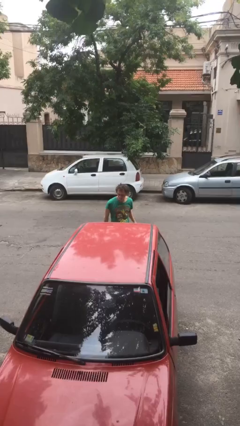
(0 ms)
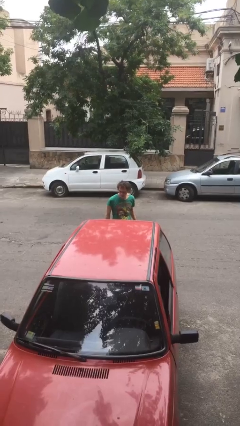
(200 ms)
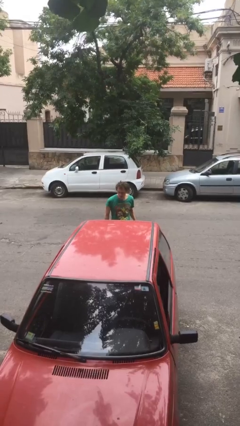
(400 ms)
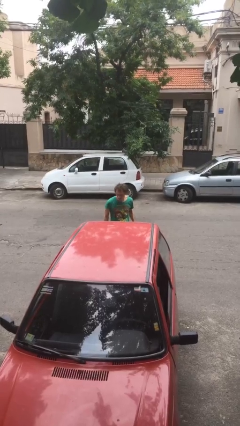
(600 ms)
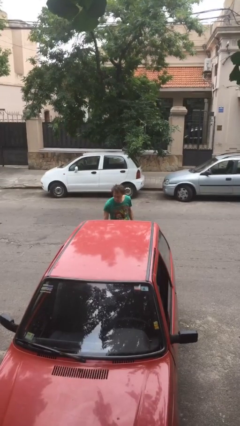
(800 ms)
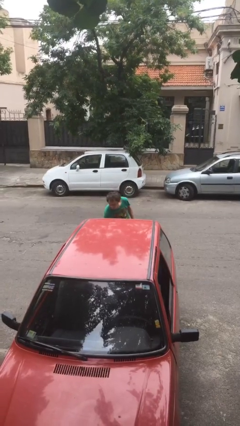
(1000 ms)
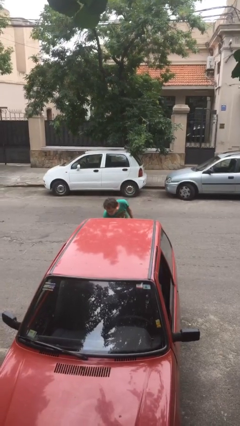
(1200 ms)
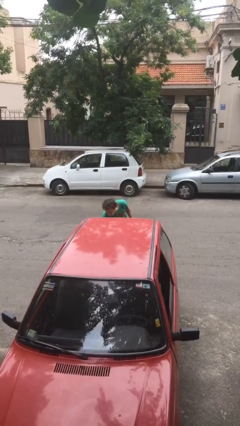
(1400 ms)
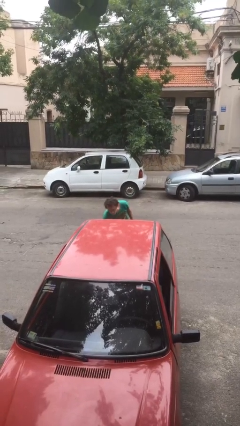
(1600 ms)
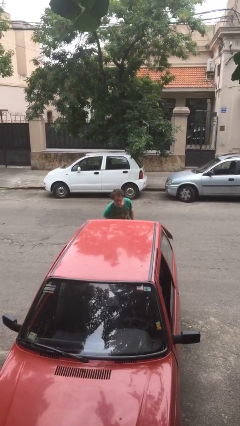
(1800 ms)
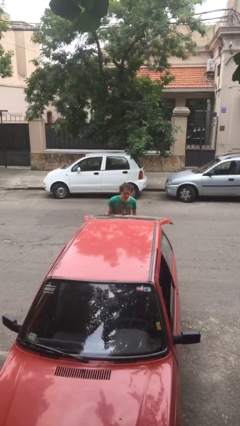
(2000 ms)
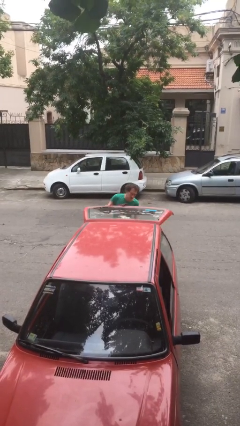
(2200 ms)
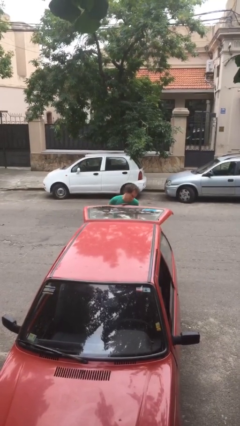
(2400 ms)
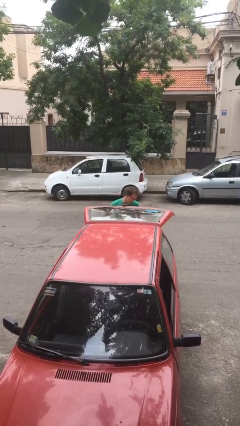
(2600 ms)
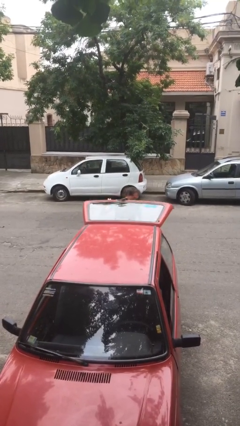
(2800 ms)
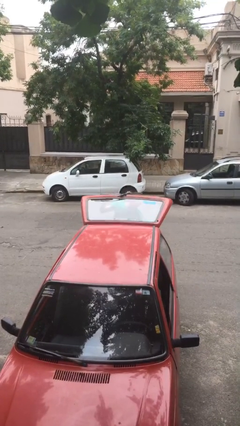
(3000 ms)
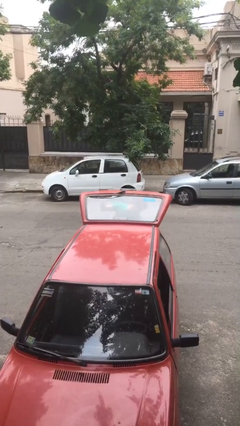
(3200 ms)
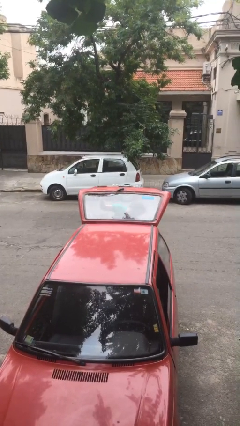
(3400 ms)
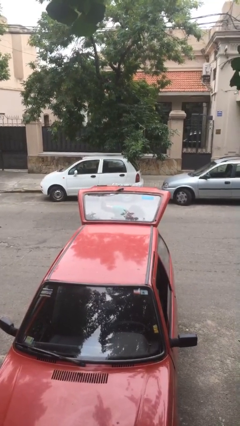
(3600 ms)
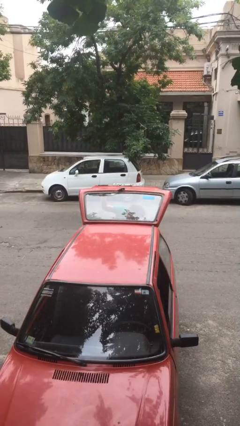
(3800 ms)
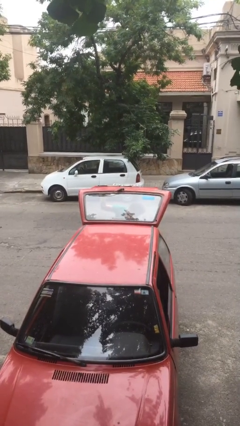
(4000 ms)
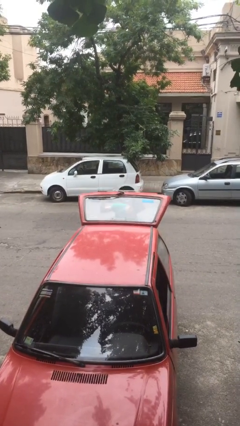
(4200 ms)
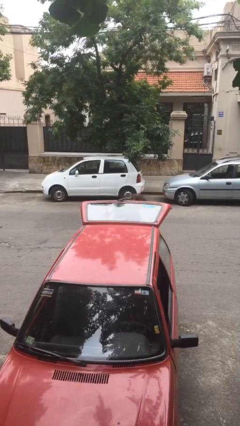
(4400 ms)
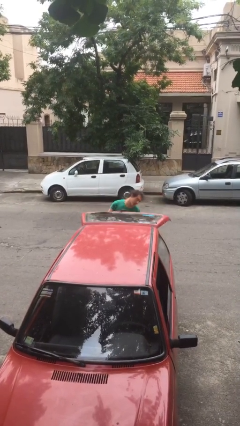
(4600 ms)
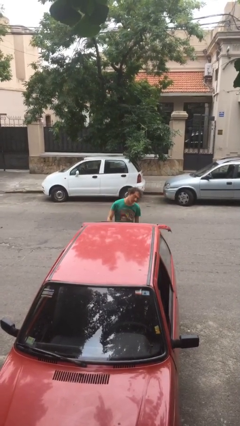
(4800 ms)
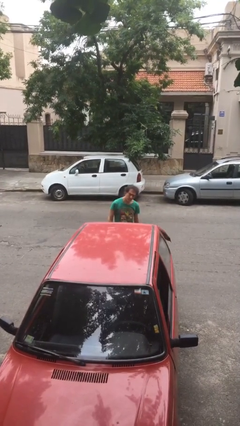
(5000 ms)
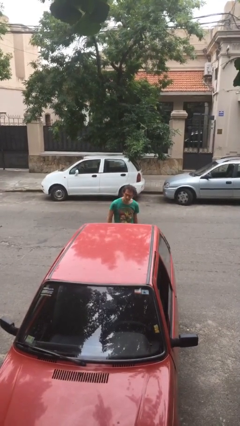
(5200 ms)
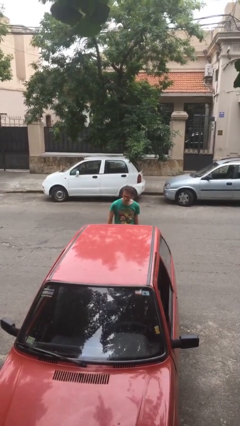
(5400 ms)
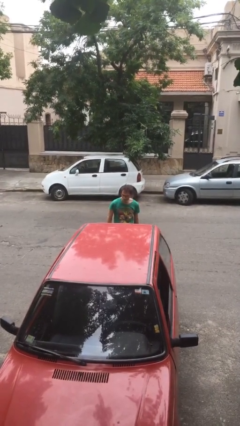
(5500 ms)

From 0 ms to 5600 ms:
person loads car

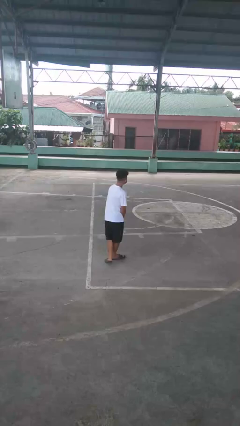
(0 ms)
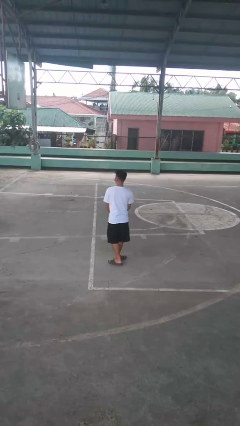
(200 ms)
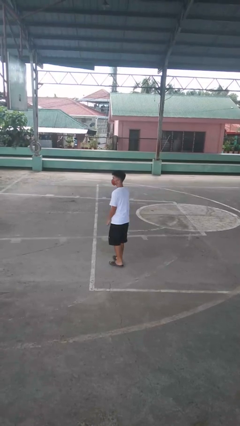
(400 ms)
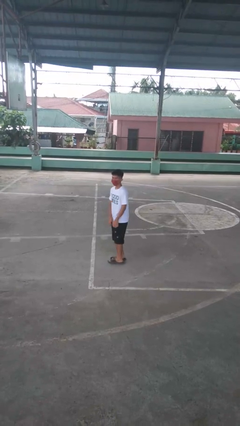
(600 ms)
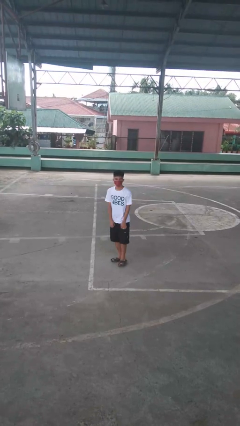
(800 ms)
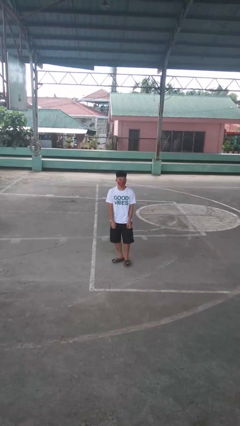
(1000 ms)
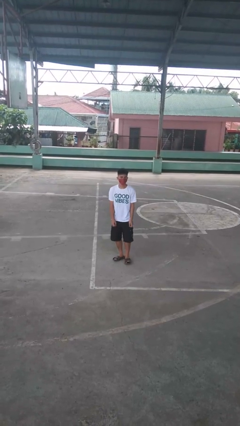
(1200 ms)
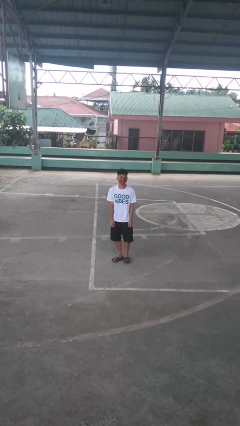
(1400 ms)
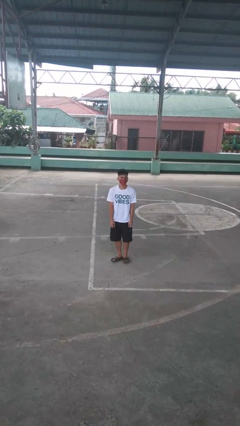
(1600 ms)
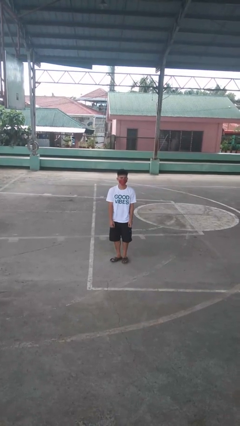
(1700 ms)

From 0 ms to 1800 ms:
person twirls

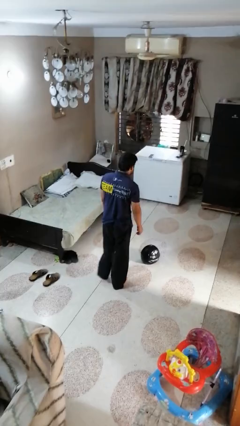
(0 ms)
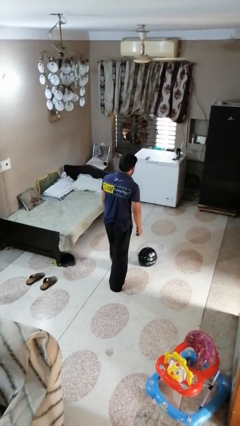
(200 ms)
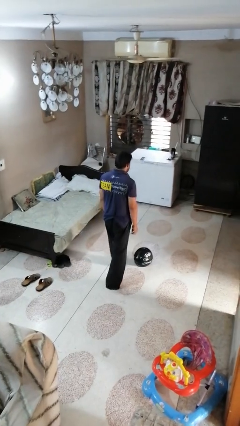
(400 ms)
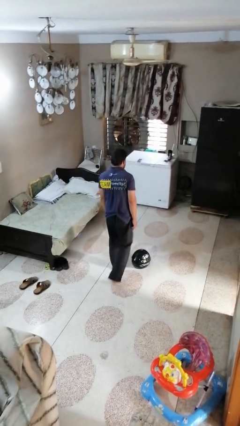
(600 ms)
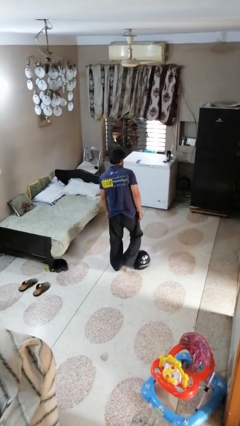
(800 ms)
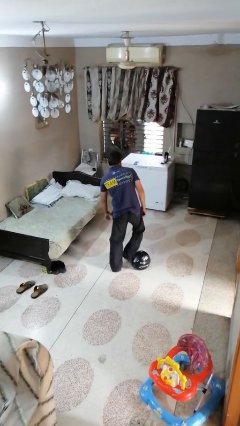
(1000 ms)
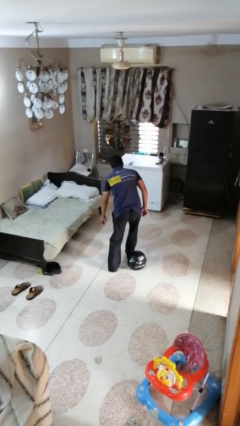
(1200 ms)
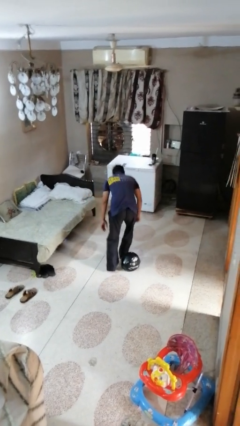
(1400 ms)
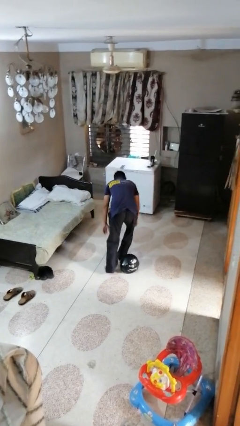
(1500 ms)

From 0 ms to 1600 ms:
person trips on object on floor

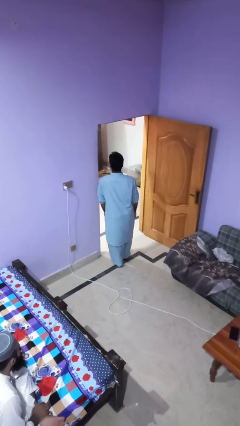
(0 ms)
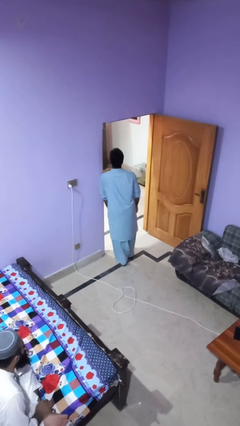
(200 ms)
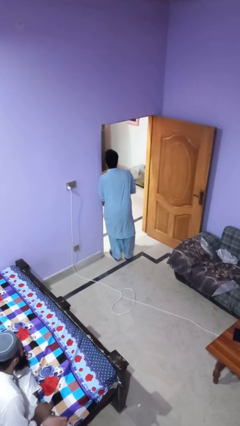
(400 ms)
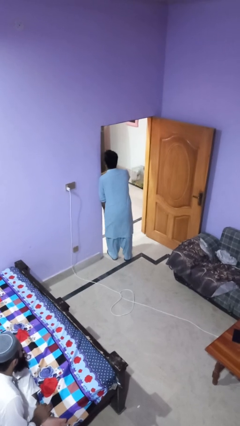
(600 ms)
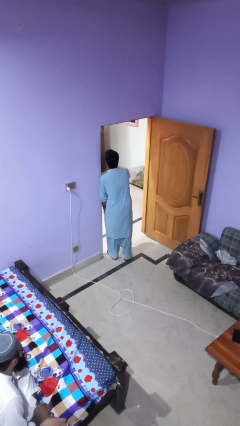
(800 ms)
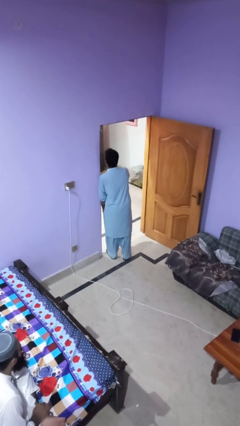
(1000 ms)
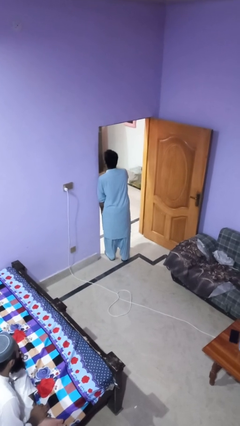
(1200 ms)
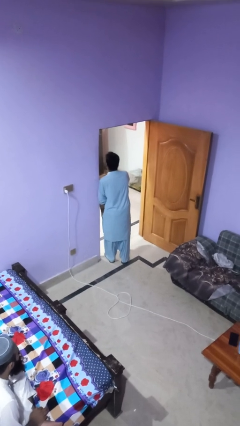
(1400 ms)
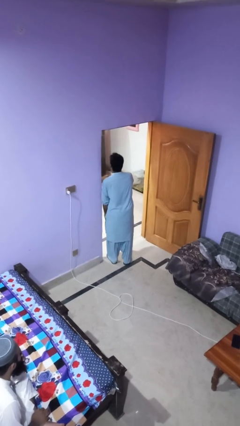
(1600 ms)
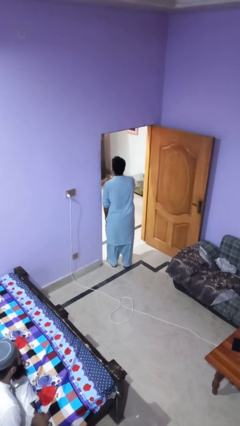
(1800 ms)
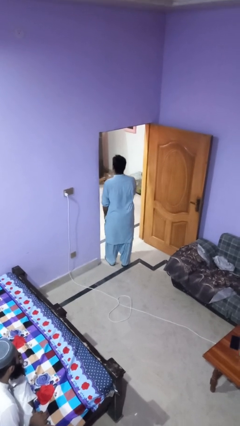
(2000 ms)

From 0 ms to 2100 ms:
person bumps into wall

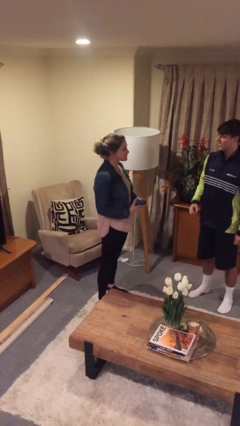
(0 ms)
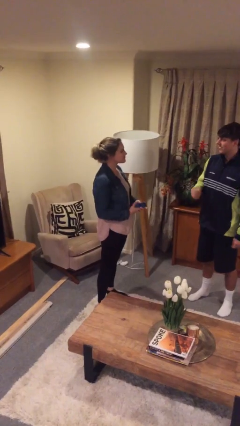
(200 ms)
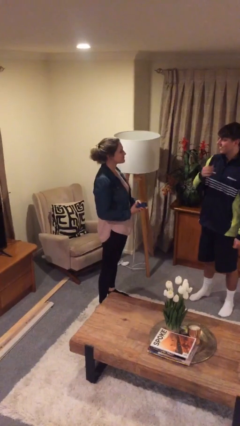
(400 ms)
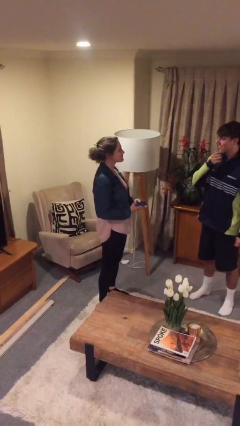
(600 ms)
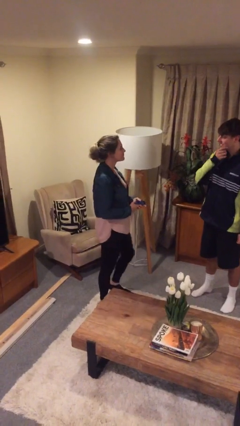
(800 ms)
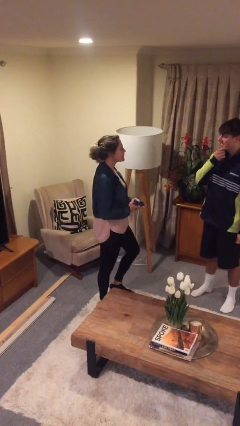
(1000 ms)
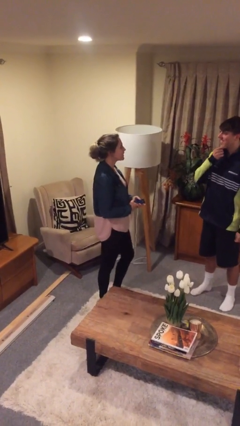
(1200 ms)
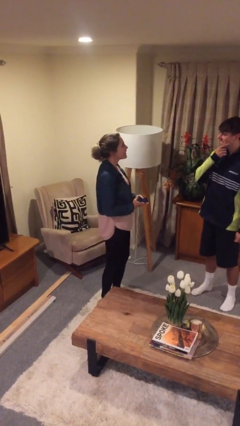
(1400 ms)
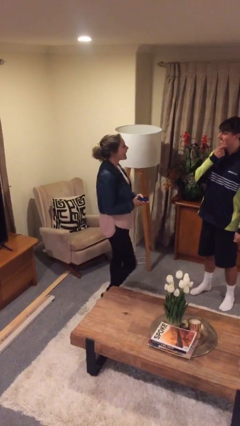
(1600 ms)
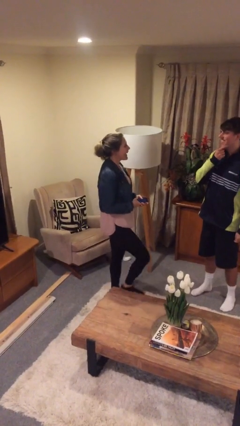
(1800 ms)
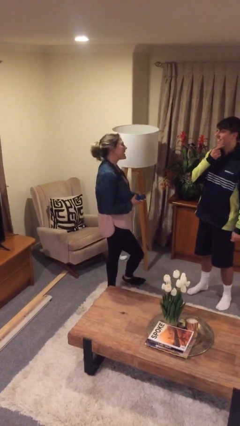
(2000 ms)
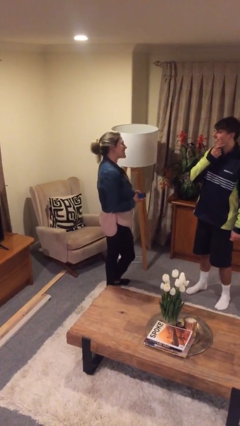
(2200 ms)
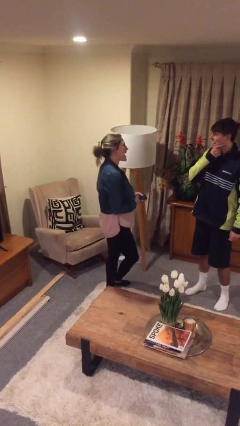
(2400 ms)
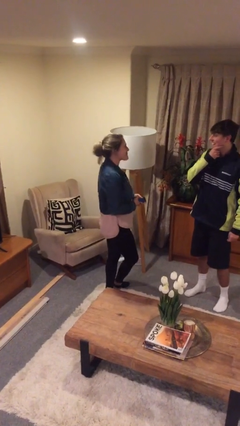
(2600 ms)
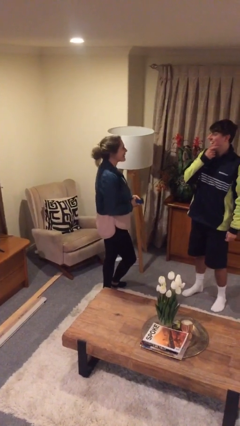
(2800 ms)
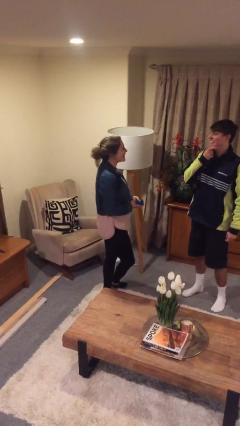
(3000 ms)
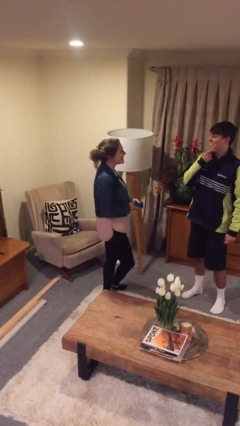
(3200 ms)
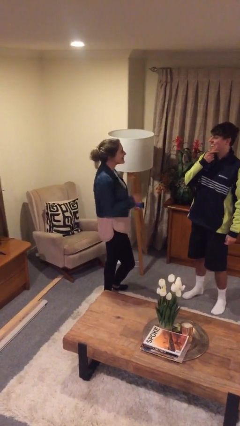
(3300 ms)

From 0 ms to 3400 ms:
person talks to person

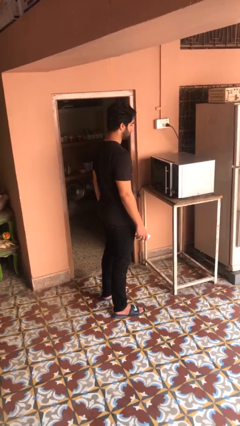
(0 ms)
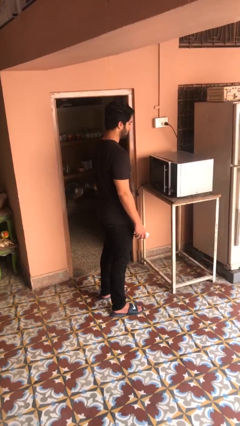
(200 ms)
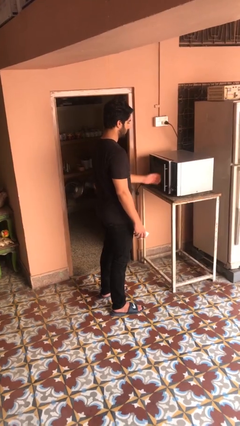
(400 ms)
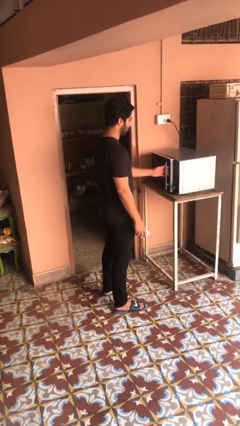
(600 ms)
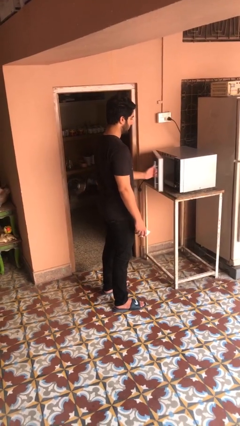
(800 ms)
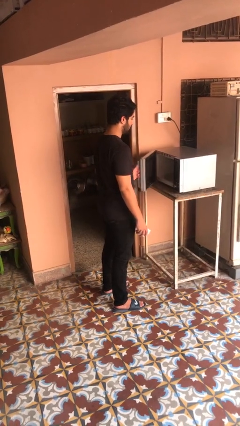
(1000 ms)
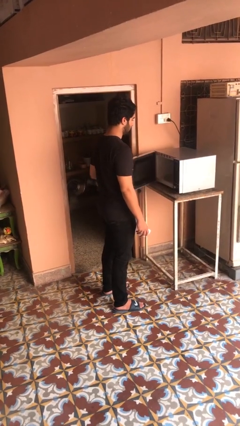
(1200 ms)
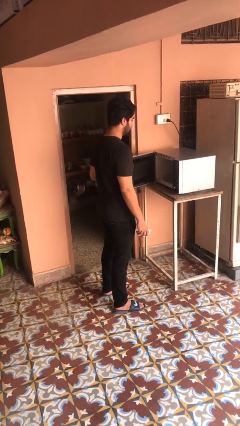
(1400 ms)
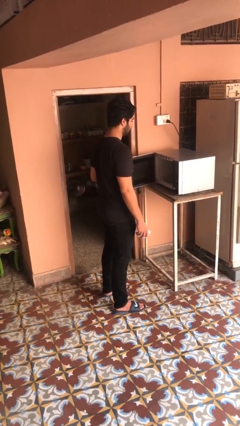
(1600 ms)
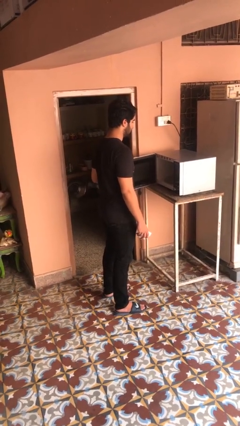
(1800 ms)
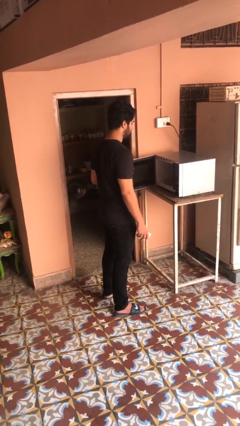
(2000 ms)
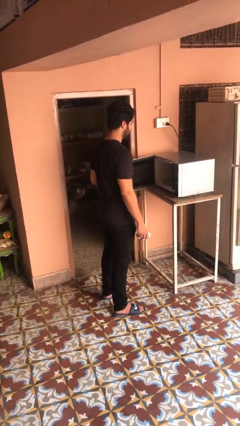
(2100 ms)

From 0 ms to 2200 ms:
person opens microwave

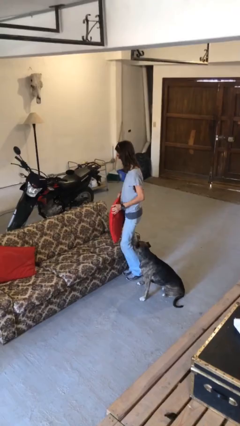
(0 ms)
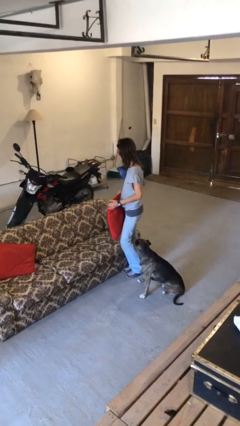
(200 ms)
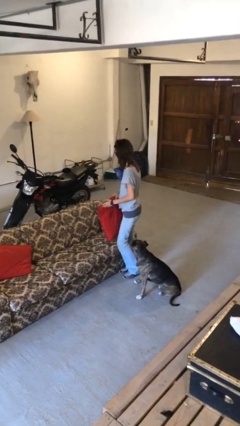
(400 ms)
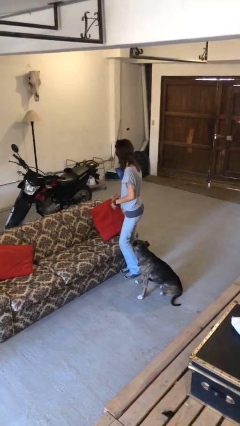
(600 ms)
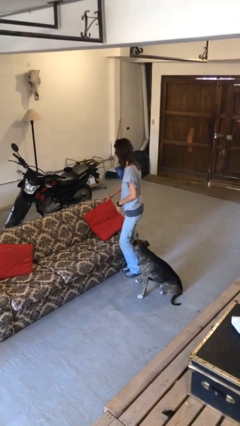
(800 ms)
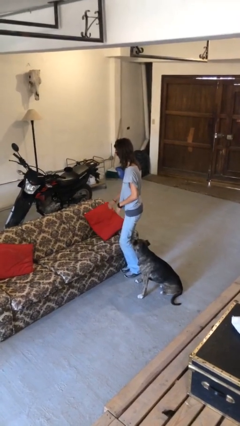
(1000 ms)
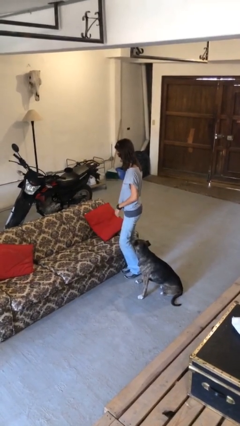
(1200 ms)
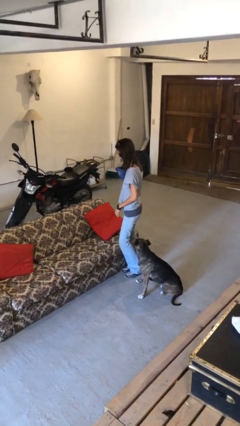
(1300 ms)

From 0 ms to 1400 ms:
person puts down object on couch
